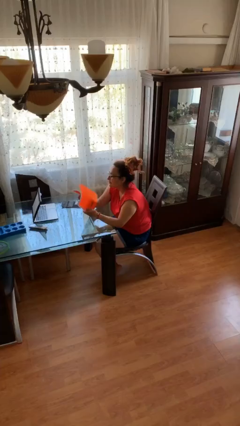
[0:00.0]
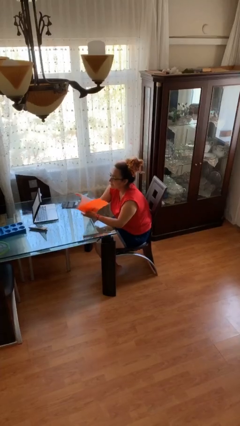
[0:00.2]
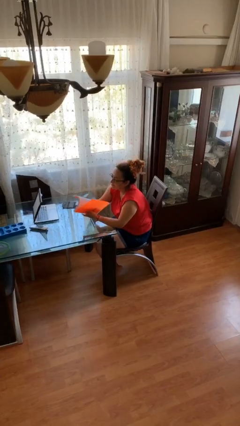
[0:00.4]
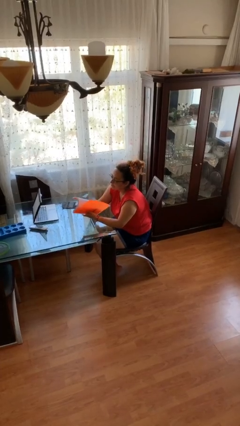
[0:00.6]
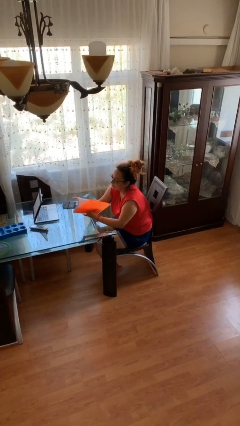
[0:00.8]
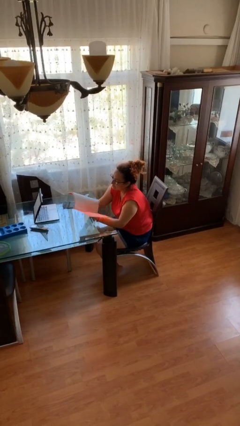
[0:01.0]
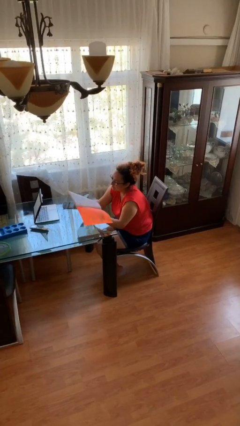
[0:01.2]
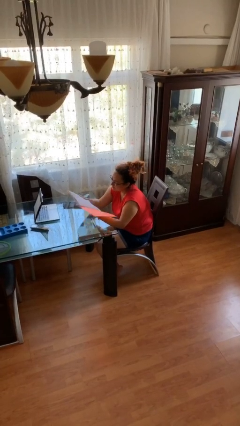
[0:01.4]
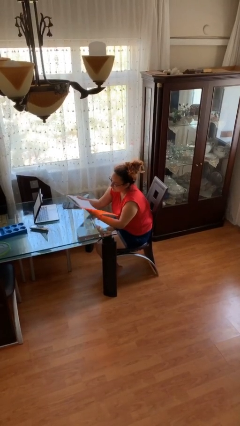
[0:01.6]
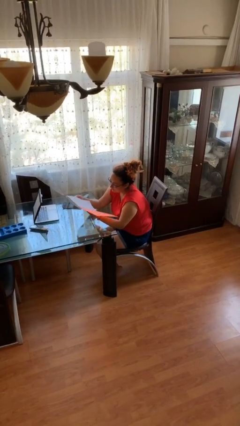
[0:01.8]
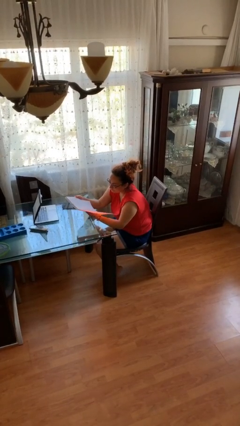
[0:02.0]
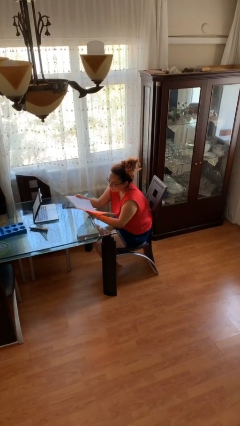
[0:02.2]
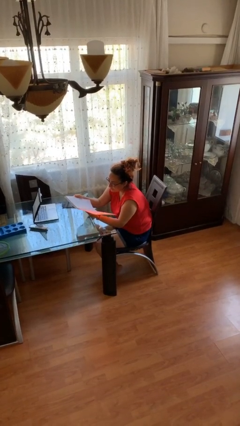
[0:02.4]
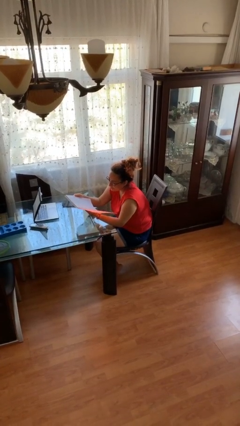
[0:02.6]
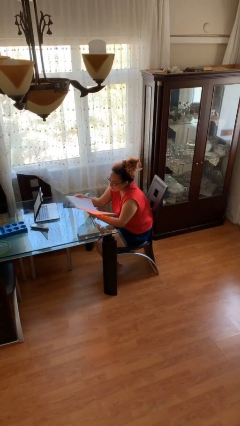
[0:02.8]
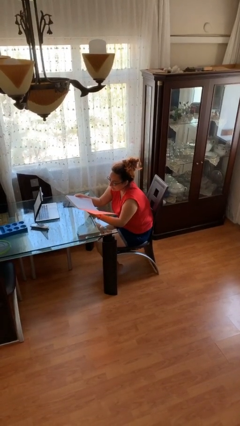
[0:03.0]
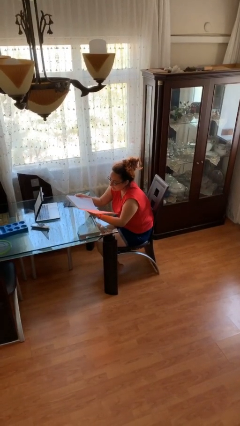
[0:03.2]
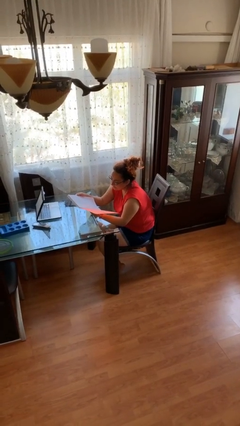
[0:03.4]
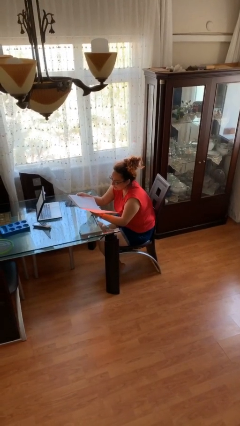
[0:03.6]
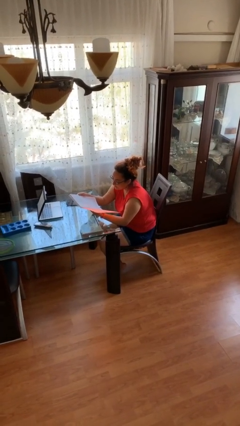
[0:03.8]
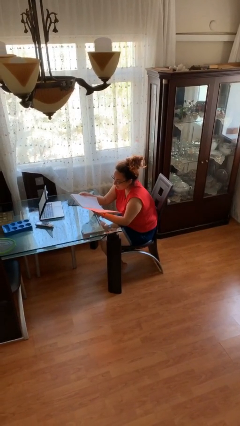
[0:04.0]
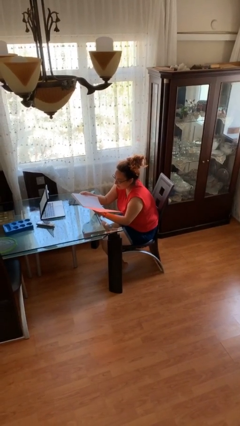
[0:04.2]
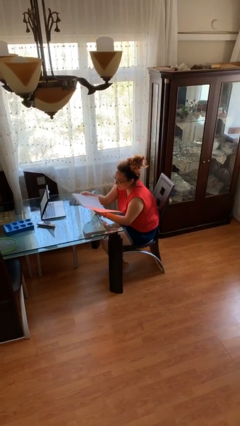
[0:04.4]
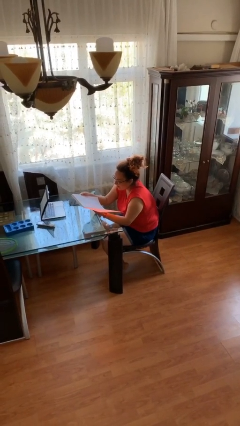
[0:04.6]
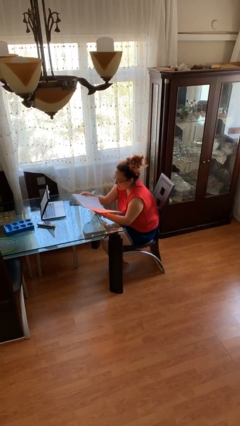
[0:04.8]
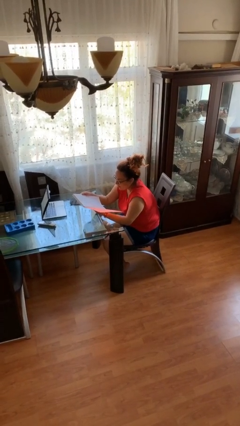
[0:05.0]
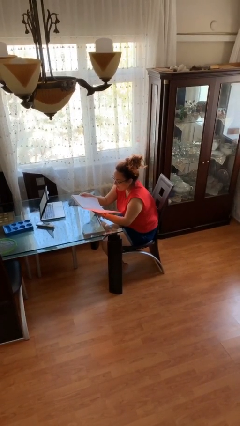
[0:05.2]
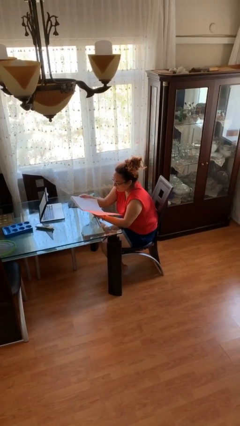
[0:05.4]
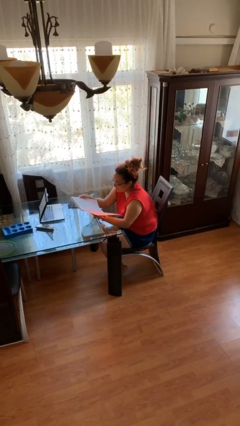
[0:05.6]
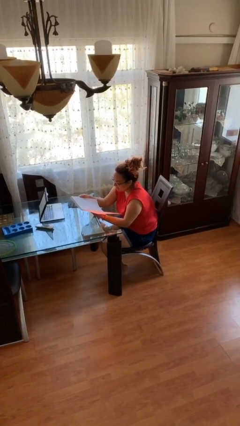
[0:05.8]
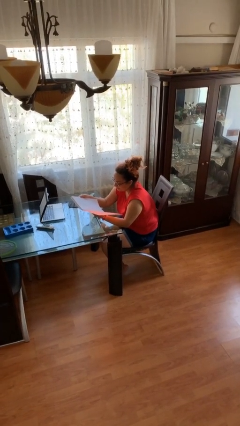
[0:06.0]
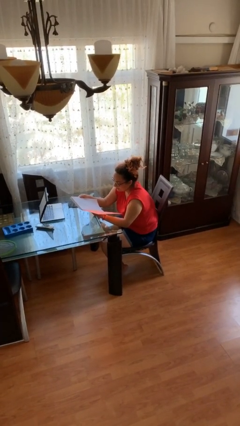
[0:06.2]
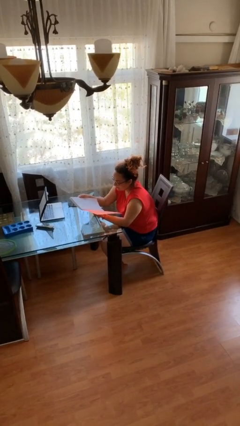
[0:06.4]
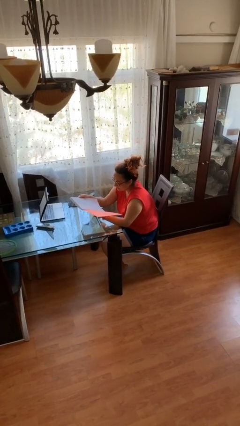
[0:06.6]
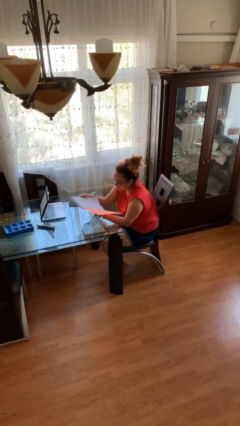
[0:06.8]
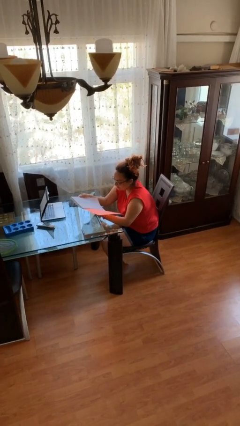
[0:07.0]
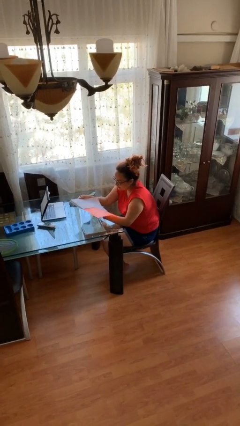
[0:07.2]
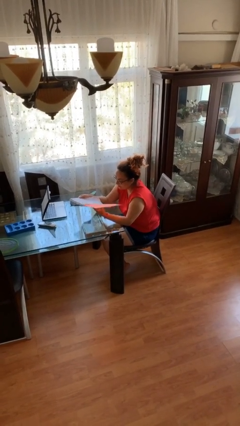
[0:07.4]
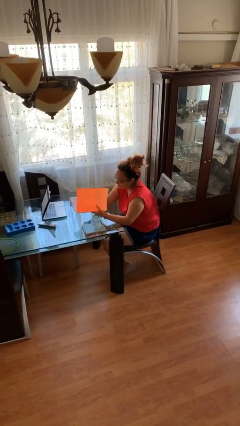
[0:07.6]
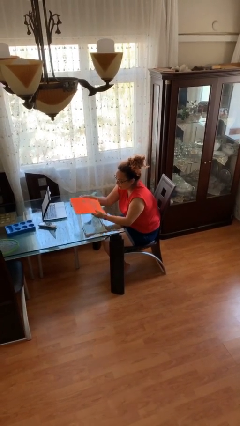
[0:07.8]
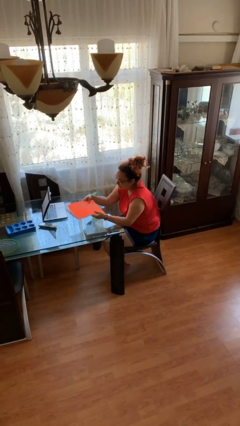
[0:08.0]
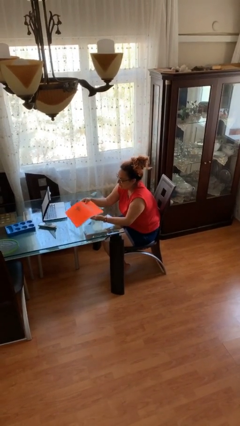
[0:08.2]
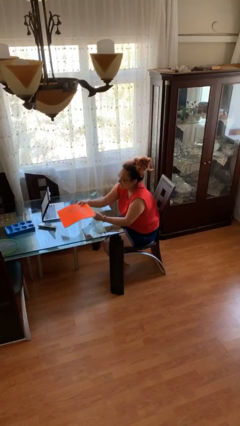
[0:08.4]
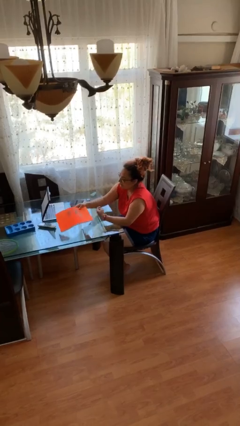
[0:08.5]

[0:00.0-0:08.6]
person reads document

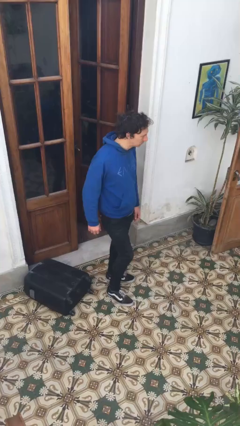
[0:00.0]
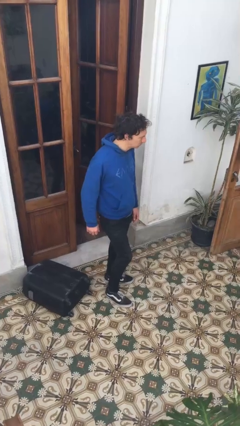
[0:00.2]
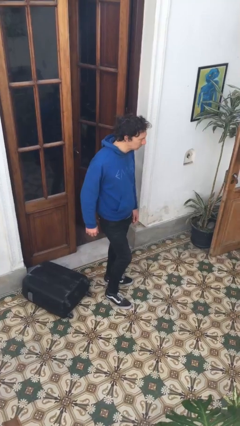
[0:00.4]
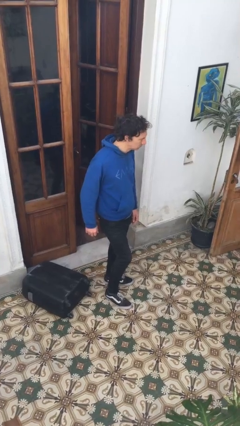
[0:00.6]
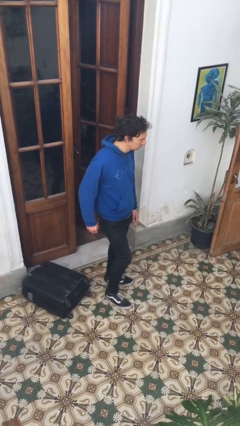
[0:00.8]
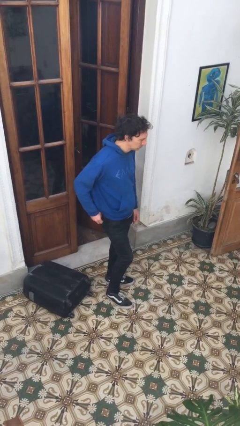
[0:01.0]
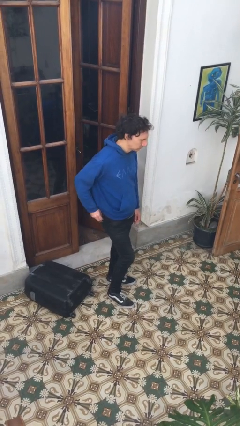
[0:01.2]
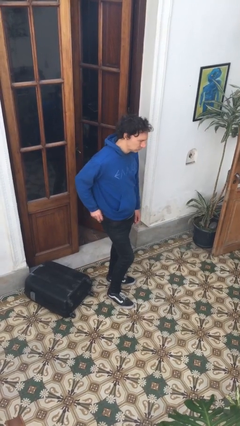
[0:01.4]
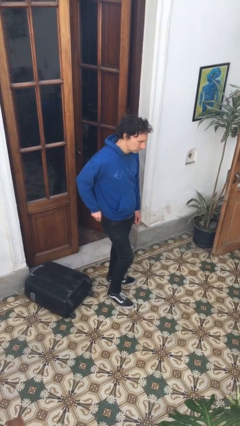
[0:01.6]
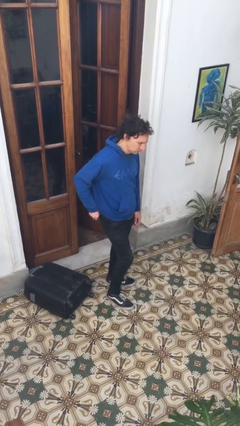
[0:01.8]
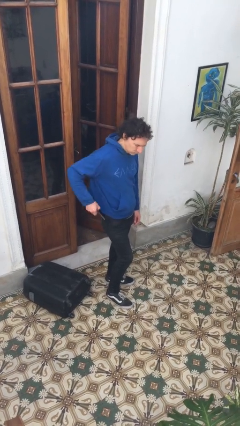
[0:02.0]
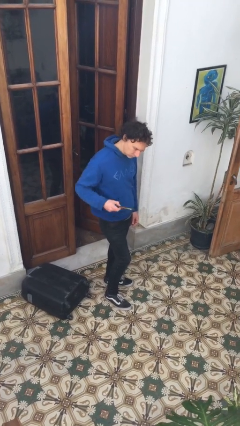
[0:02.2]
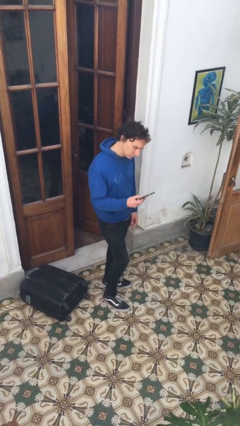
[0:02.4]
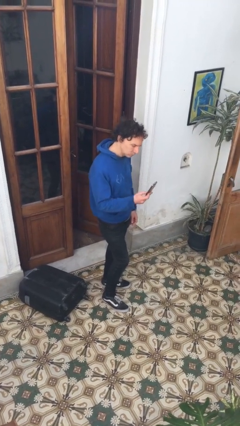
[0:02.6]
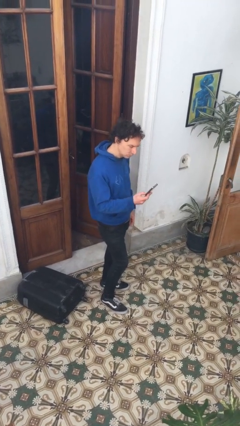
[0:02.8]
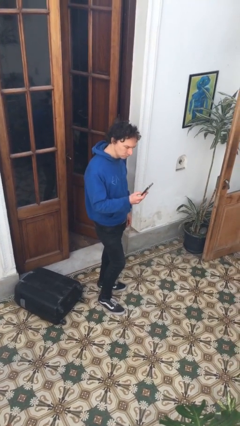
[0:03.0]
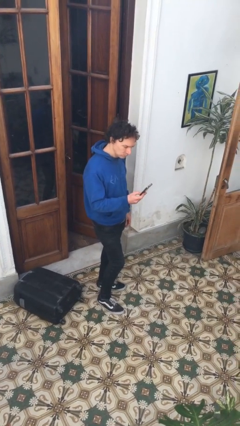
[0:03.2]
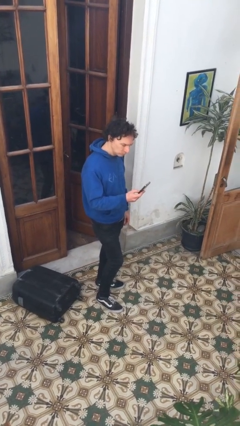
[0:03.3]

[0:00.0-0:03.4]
person takes phone from pocket

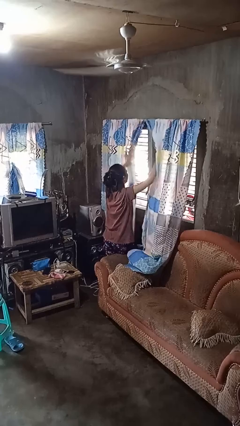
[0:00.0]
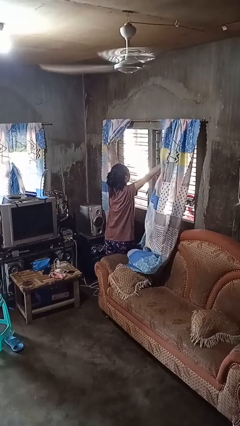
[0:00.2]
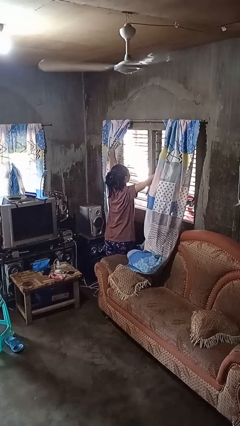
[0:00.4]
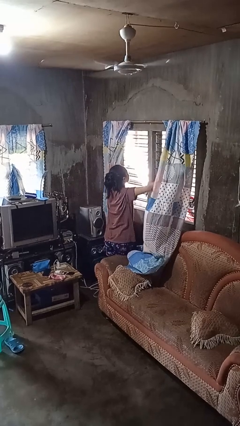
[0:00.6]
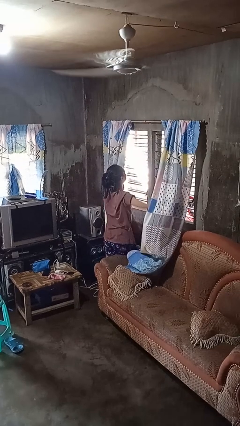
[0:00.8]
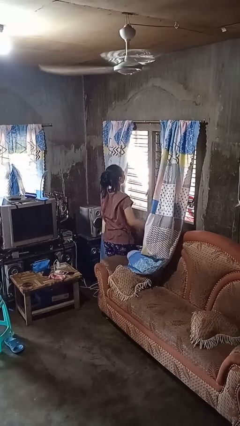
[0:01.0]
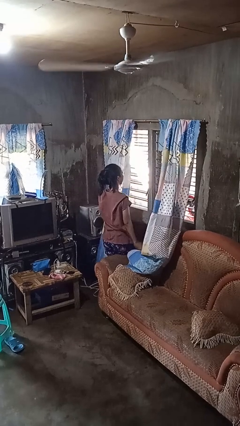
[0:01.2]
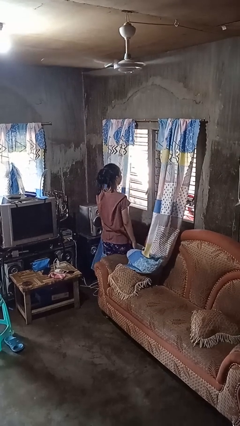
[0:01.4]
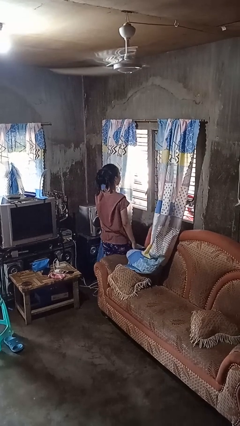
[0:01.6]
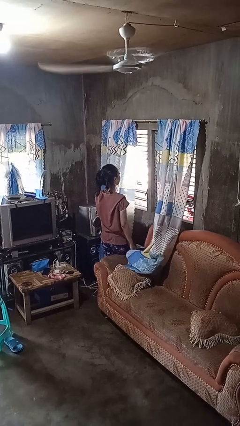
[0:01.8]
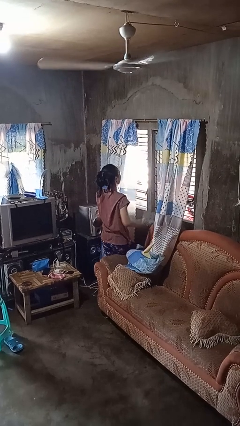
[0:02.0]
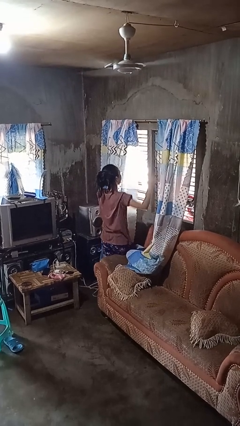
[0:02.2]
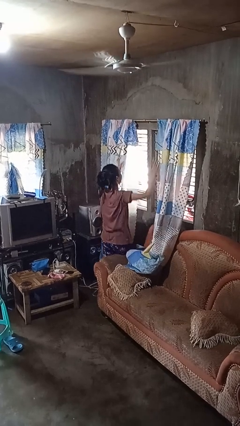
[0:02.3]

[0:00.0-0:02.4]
person opens curtains

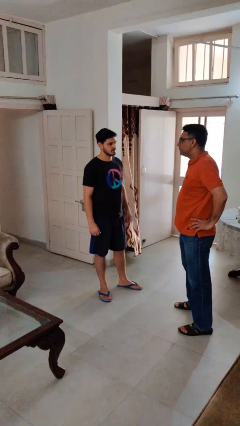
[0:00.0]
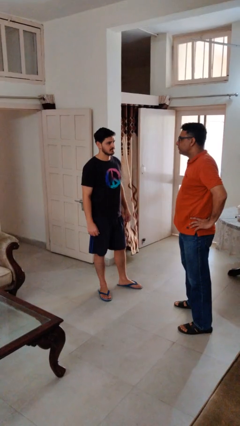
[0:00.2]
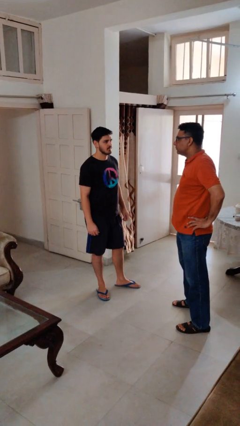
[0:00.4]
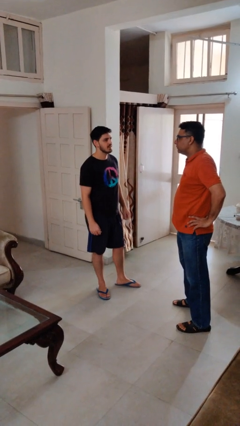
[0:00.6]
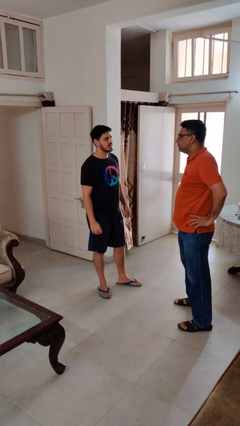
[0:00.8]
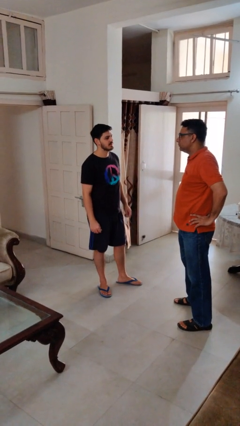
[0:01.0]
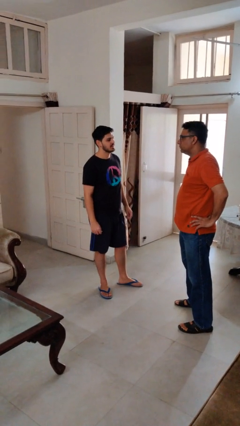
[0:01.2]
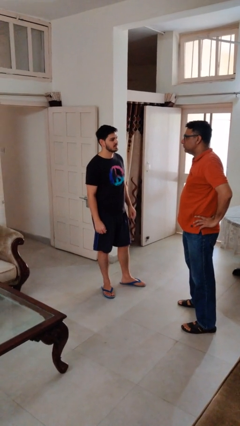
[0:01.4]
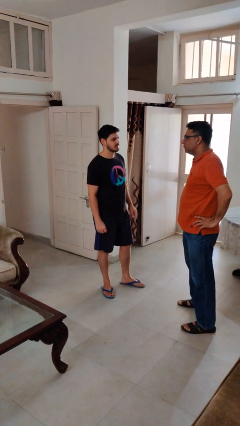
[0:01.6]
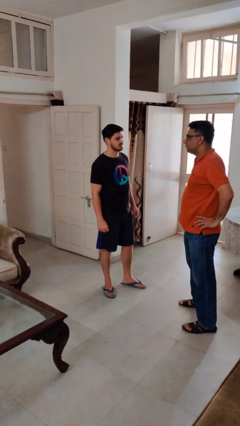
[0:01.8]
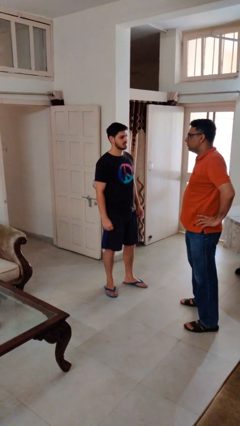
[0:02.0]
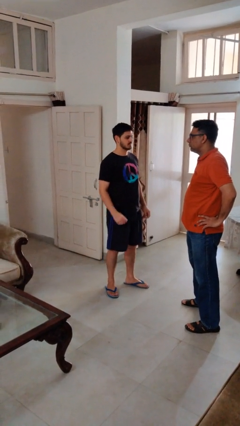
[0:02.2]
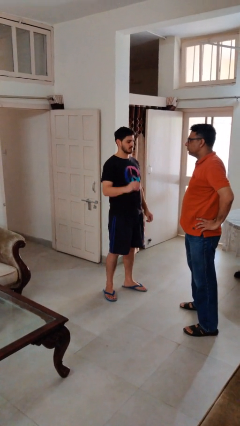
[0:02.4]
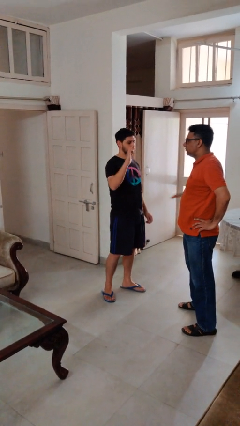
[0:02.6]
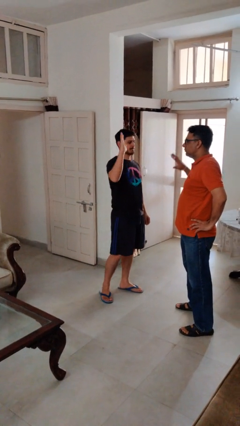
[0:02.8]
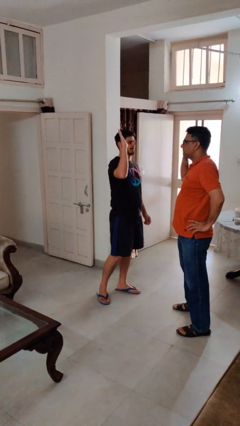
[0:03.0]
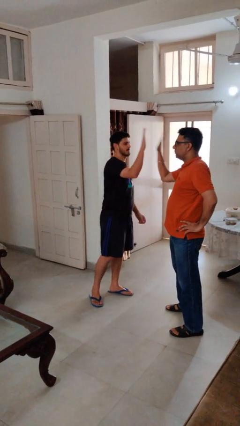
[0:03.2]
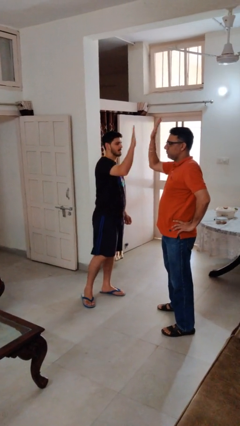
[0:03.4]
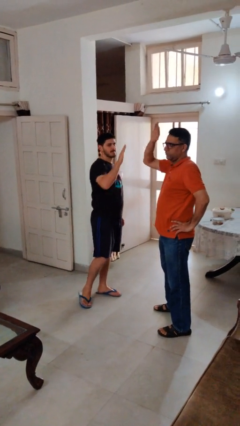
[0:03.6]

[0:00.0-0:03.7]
person highfives hand
